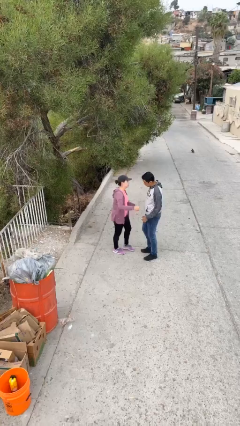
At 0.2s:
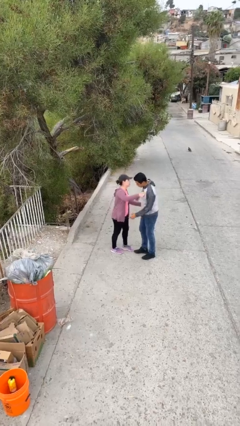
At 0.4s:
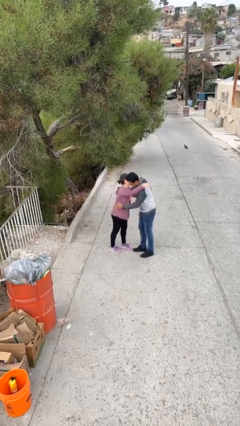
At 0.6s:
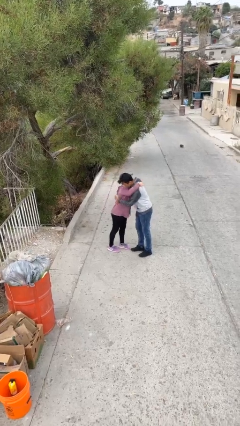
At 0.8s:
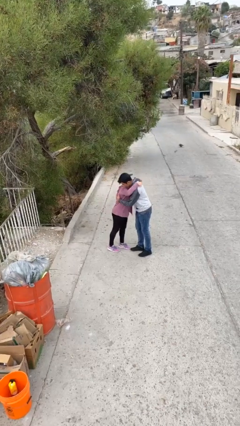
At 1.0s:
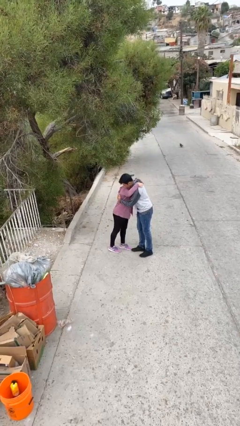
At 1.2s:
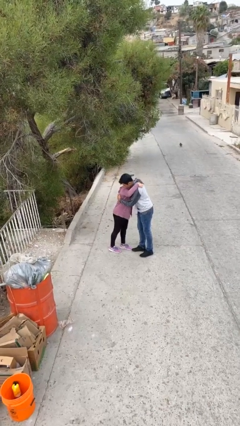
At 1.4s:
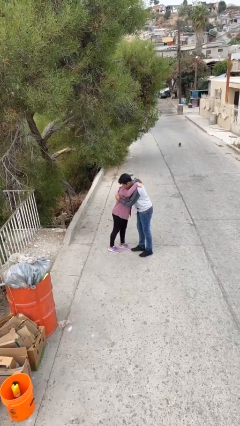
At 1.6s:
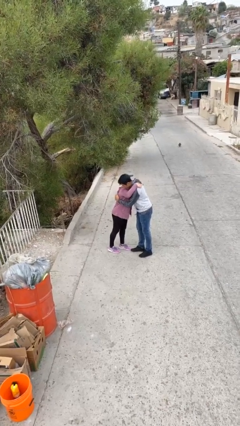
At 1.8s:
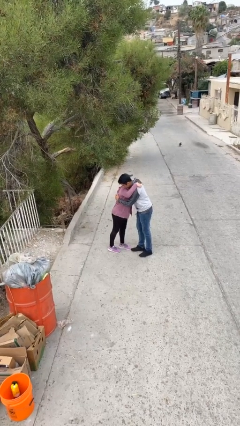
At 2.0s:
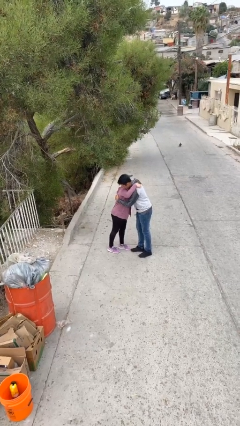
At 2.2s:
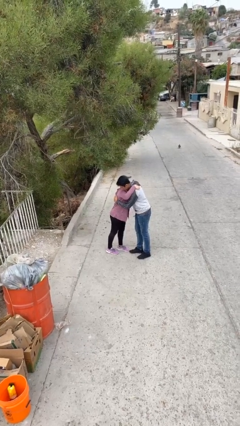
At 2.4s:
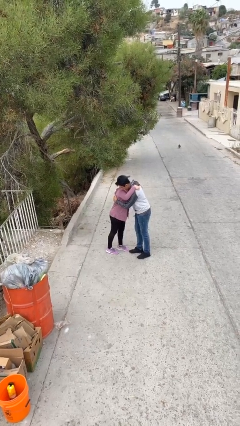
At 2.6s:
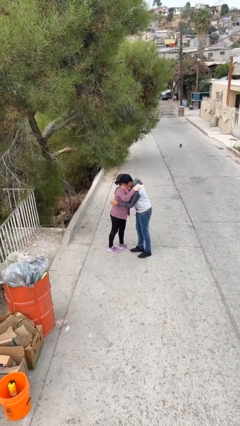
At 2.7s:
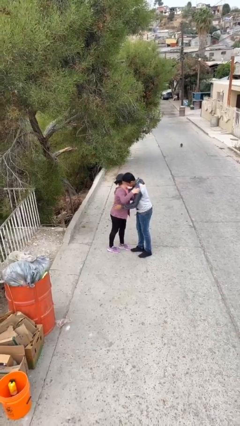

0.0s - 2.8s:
person embraces person

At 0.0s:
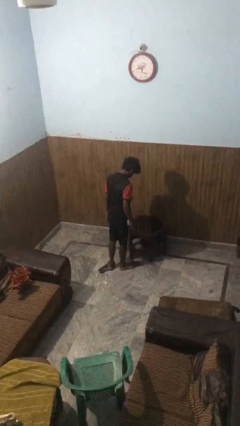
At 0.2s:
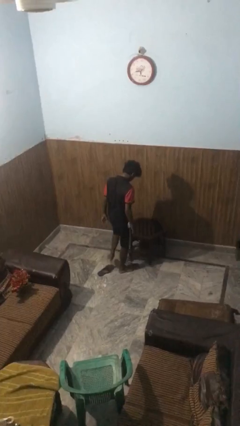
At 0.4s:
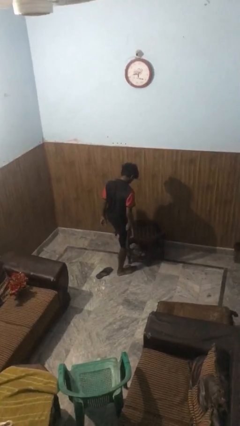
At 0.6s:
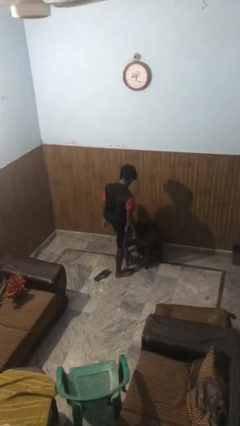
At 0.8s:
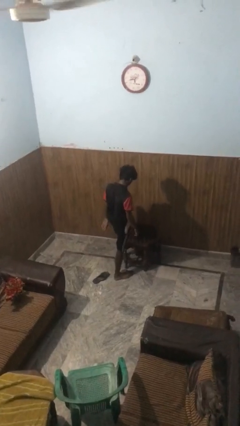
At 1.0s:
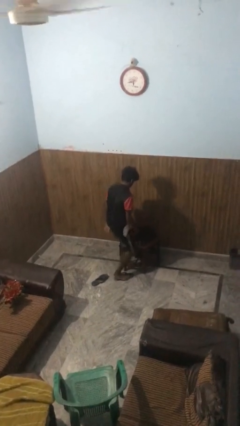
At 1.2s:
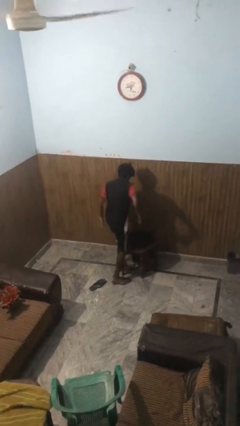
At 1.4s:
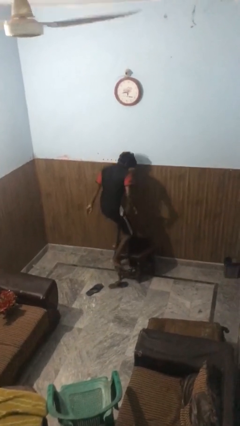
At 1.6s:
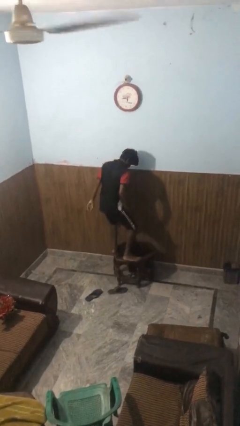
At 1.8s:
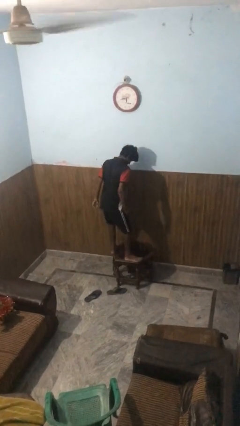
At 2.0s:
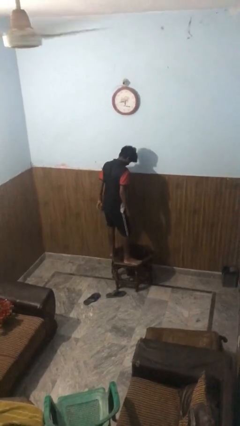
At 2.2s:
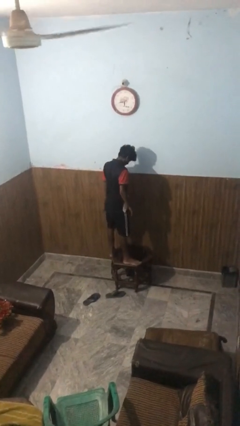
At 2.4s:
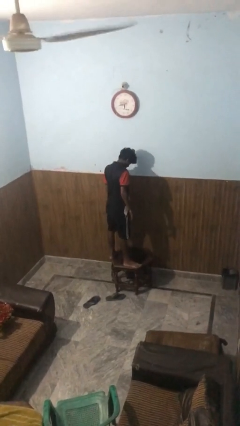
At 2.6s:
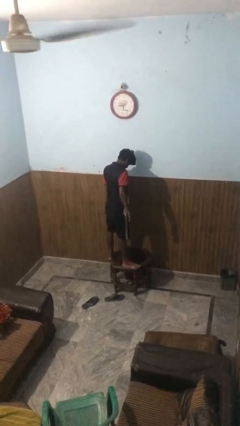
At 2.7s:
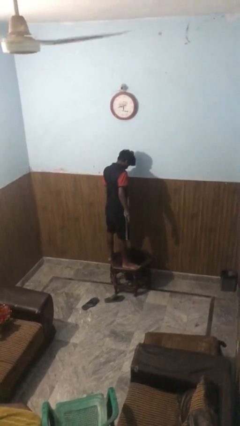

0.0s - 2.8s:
person climbs on table

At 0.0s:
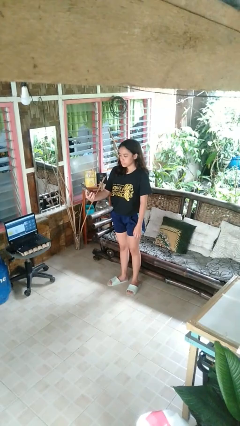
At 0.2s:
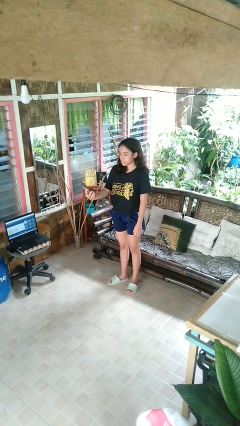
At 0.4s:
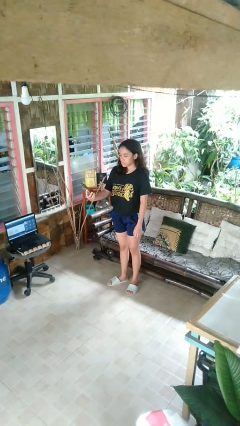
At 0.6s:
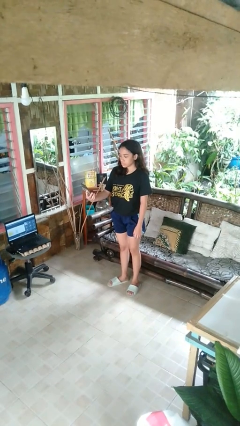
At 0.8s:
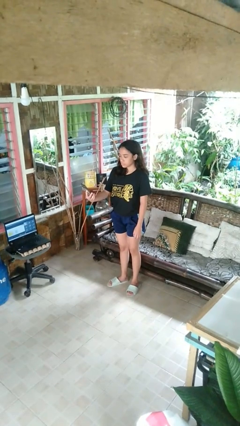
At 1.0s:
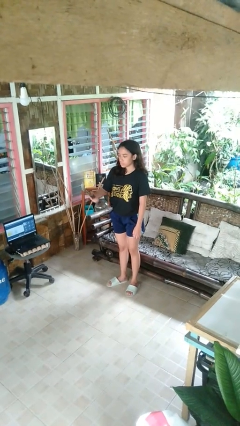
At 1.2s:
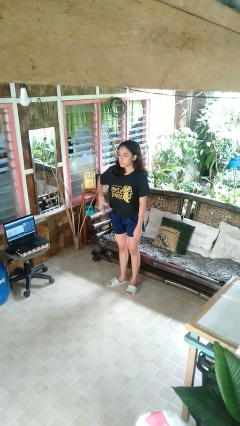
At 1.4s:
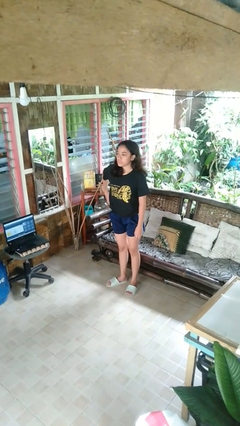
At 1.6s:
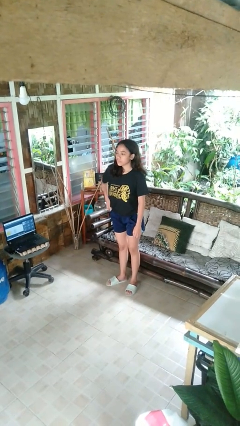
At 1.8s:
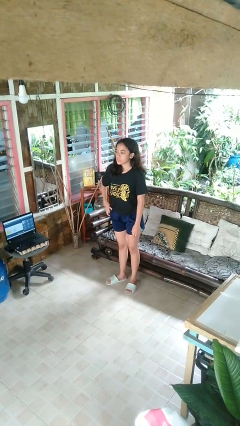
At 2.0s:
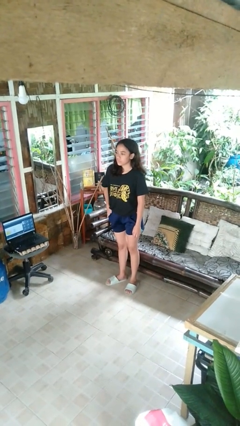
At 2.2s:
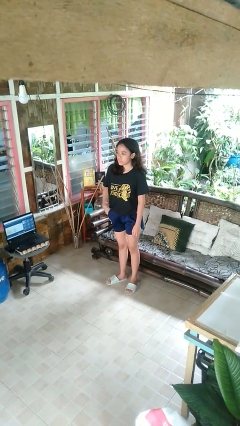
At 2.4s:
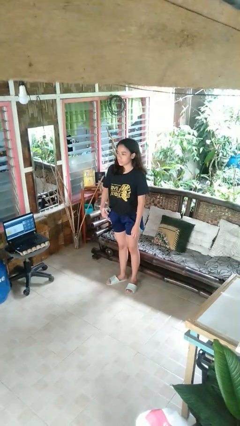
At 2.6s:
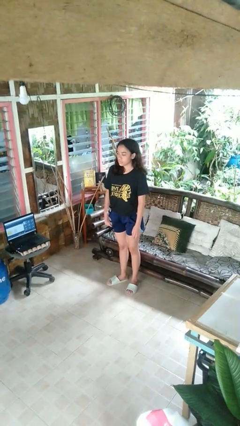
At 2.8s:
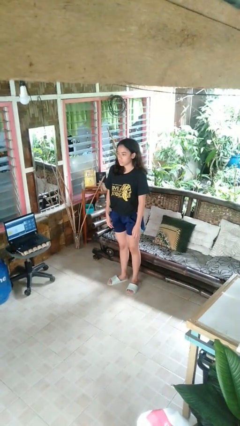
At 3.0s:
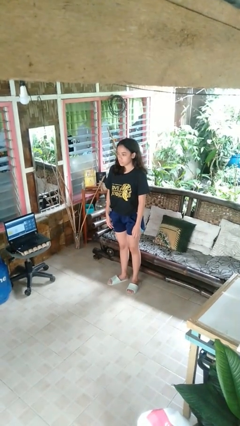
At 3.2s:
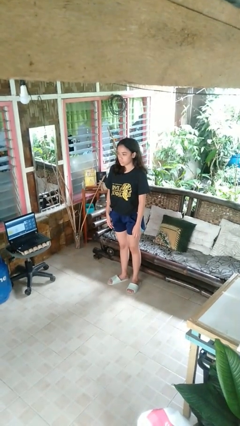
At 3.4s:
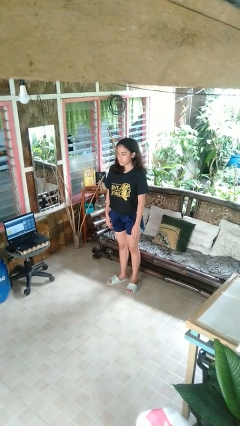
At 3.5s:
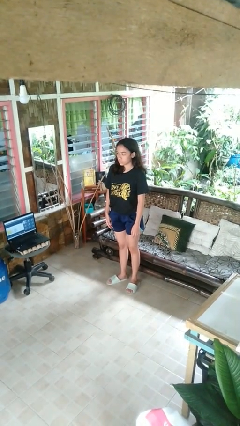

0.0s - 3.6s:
person puts phone into pocket

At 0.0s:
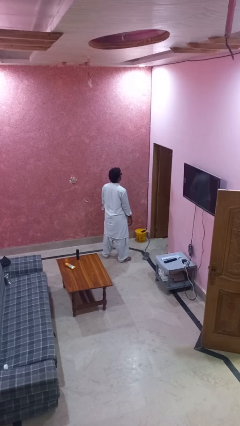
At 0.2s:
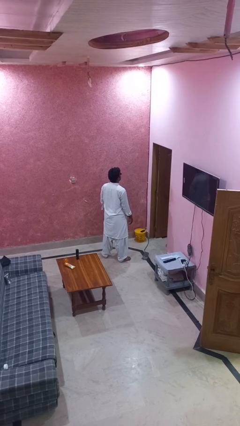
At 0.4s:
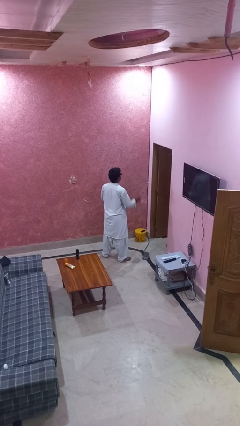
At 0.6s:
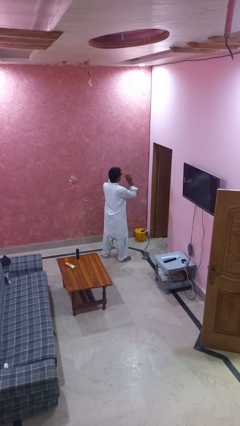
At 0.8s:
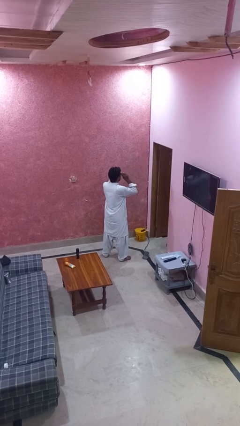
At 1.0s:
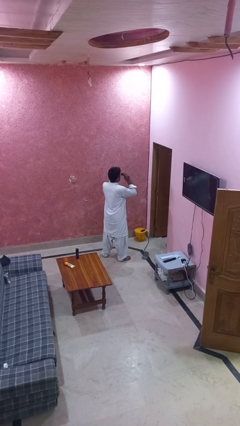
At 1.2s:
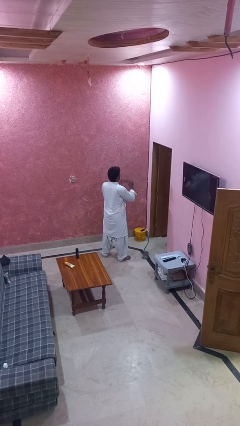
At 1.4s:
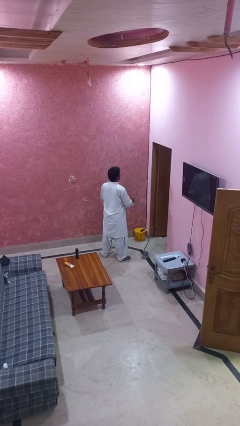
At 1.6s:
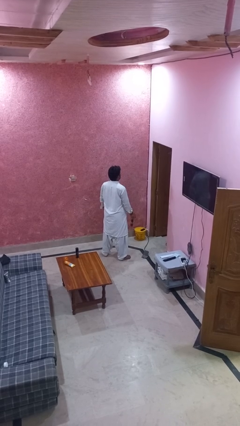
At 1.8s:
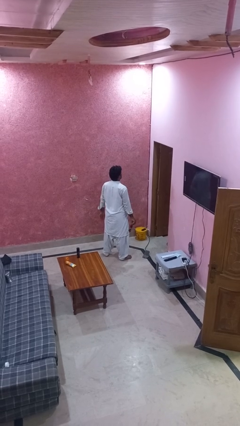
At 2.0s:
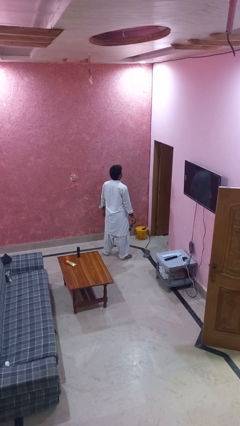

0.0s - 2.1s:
person takes off sunglasses

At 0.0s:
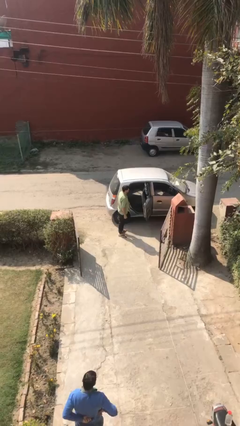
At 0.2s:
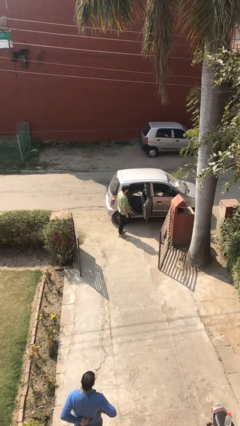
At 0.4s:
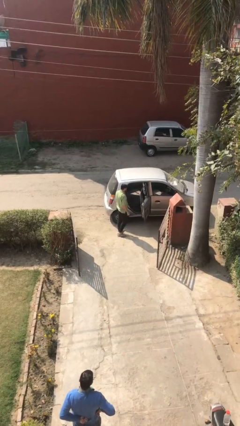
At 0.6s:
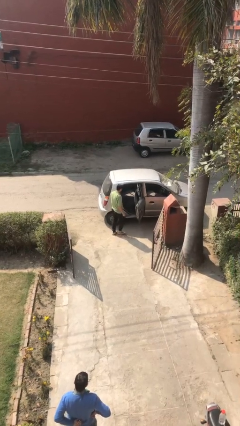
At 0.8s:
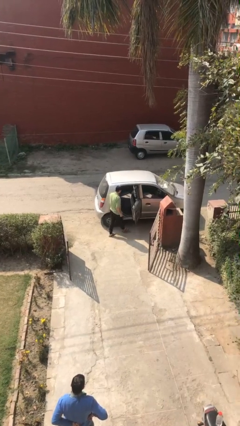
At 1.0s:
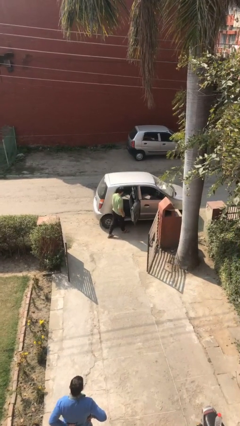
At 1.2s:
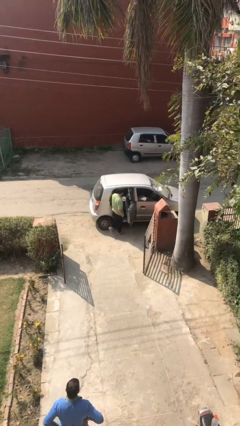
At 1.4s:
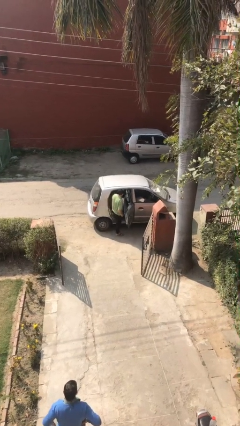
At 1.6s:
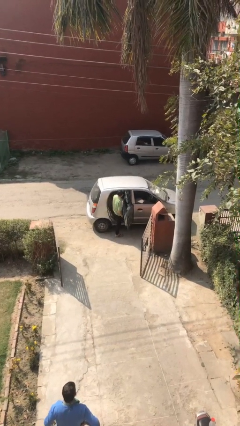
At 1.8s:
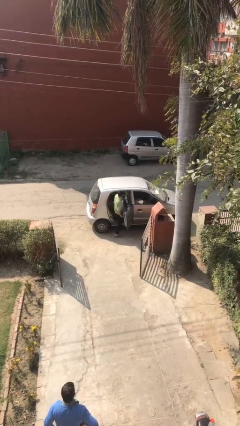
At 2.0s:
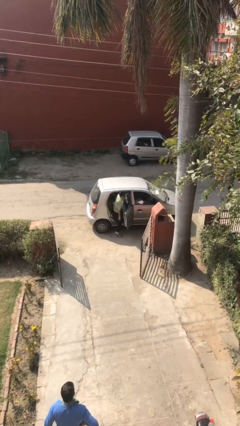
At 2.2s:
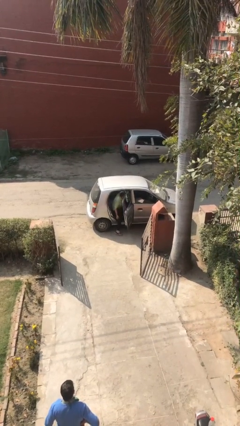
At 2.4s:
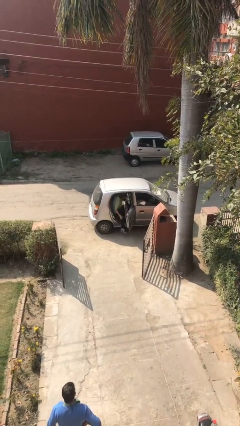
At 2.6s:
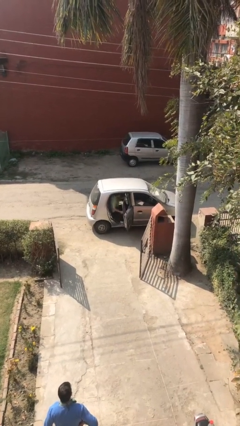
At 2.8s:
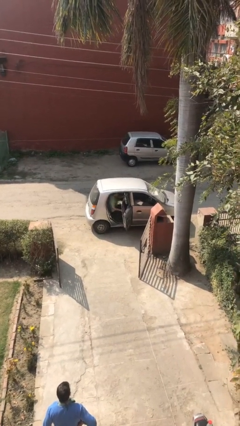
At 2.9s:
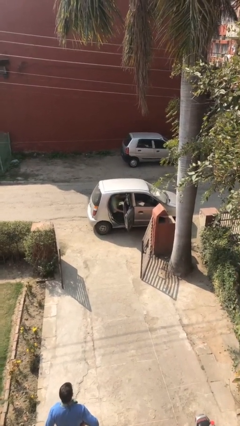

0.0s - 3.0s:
person enters car

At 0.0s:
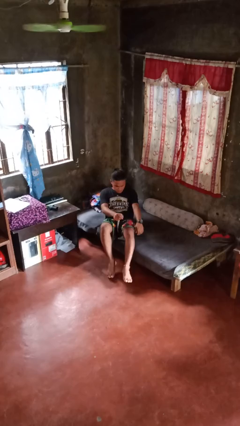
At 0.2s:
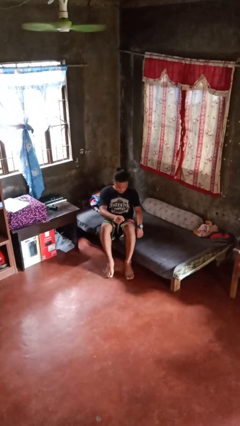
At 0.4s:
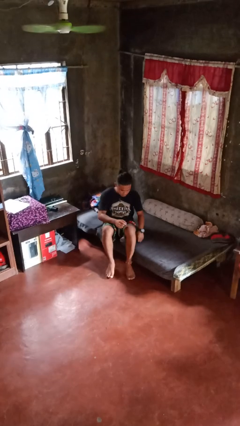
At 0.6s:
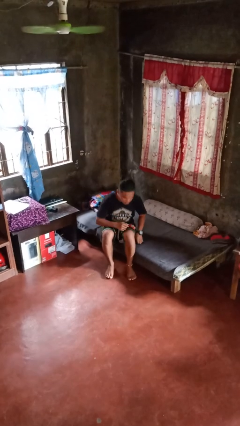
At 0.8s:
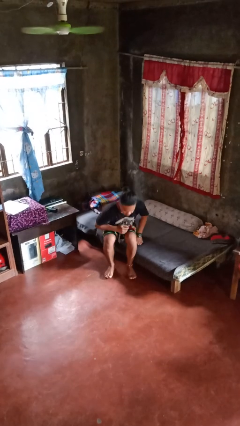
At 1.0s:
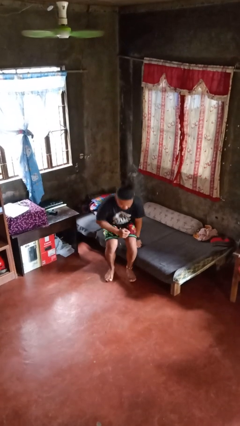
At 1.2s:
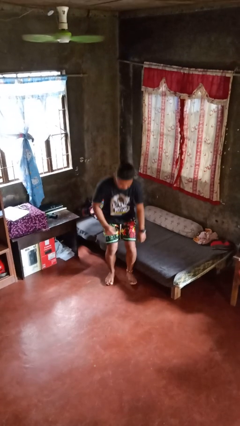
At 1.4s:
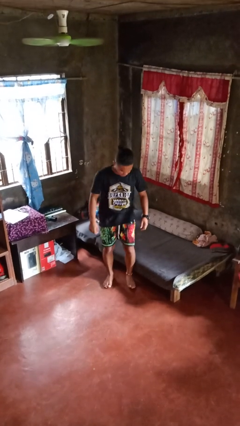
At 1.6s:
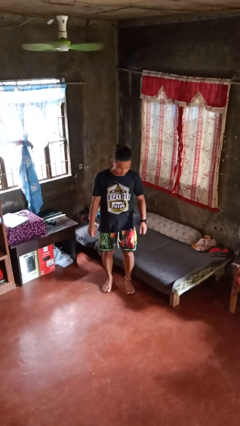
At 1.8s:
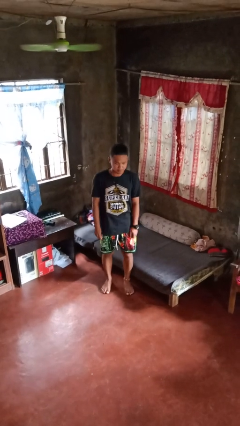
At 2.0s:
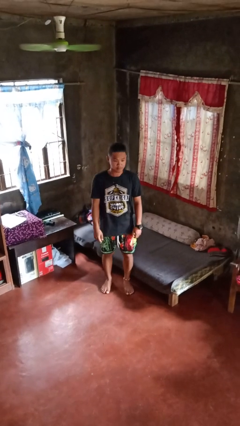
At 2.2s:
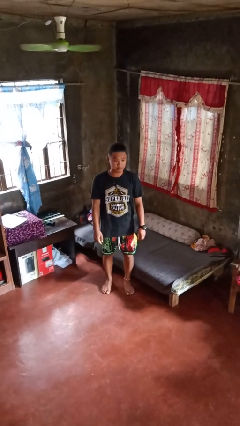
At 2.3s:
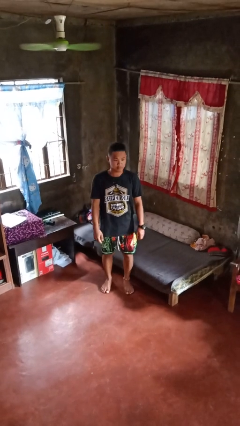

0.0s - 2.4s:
person stands up

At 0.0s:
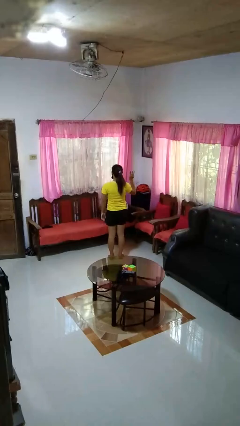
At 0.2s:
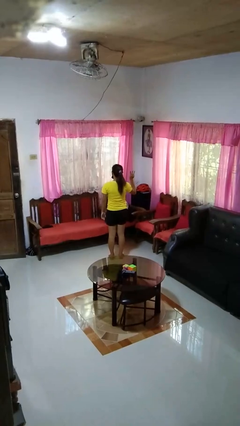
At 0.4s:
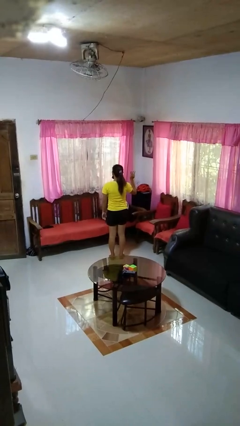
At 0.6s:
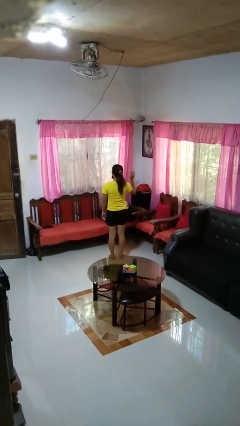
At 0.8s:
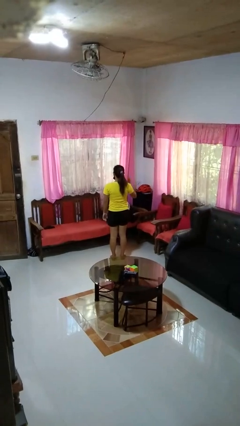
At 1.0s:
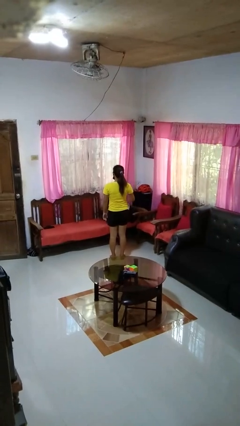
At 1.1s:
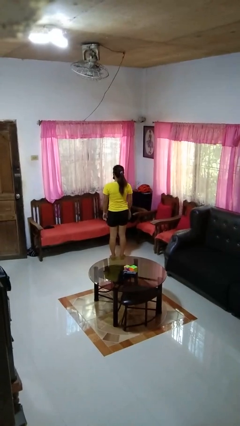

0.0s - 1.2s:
person gestures number three
